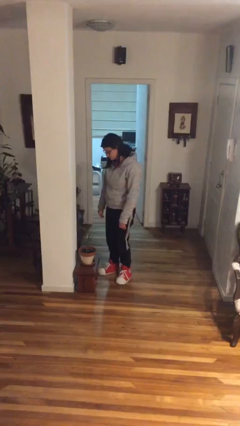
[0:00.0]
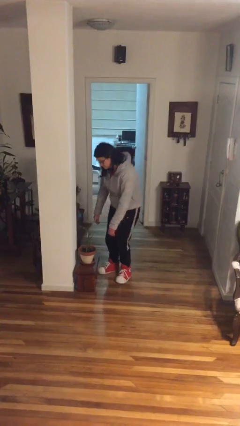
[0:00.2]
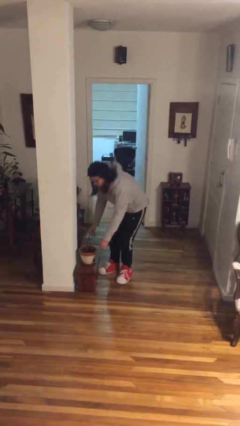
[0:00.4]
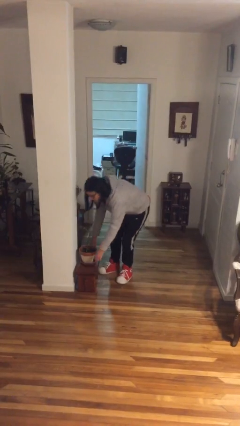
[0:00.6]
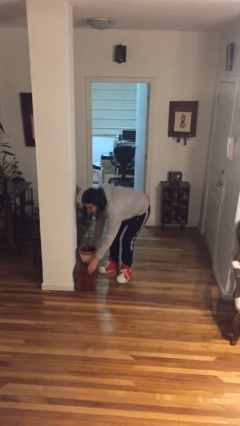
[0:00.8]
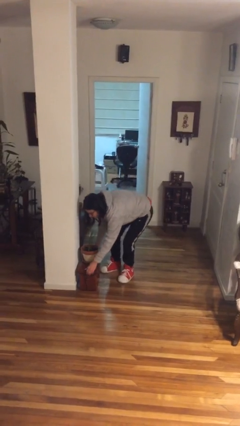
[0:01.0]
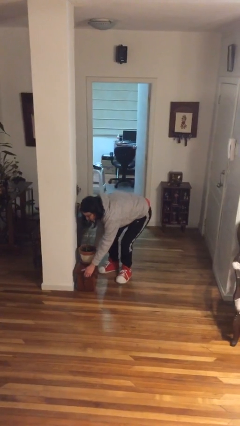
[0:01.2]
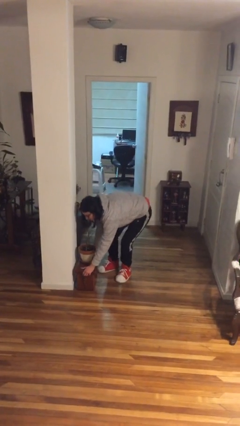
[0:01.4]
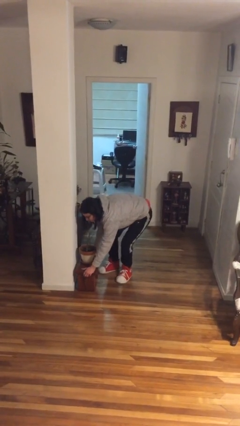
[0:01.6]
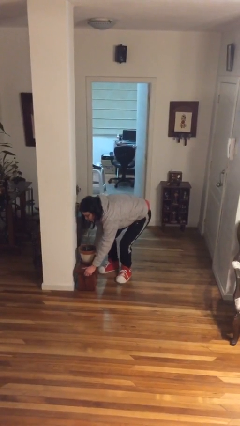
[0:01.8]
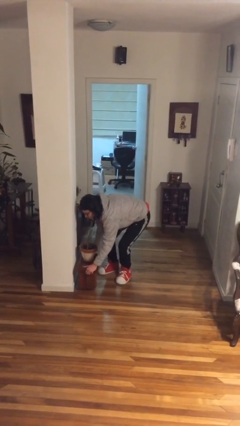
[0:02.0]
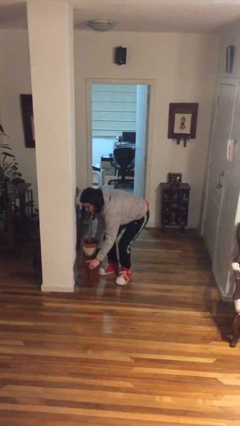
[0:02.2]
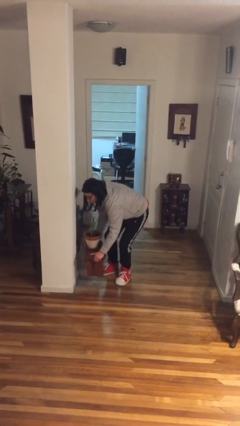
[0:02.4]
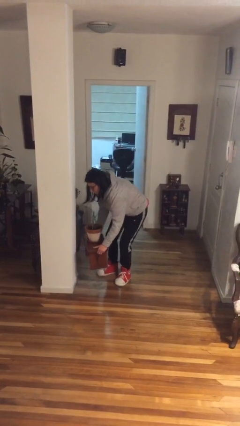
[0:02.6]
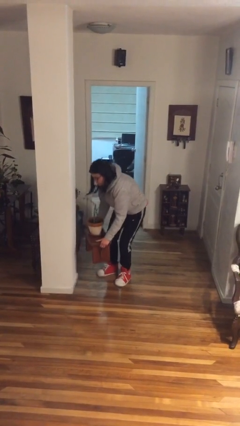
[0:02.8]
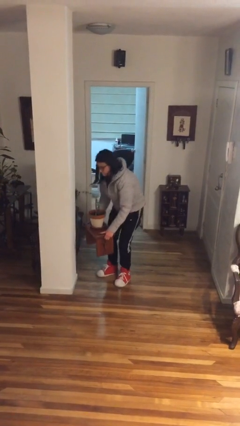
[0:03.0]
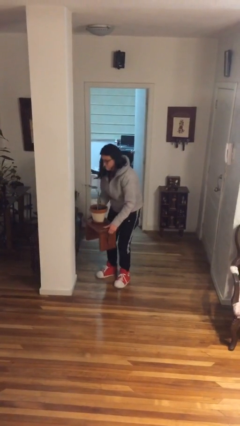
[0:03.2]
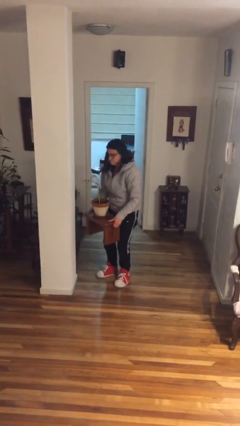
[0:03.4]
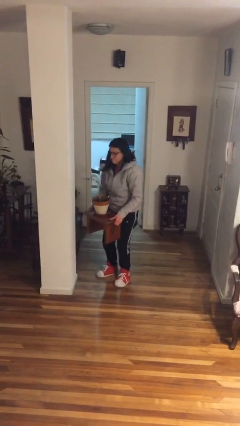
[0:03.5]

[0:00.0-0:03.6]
person picks up object from floor

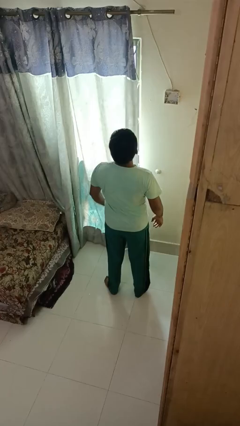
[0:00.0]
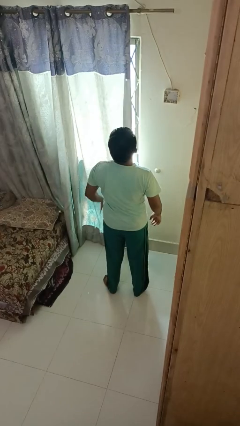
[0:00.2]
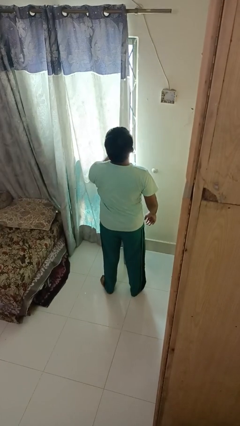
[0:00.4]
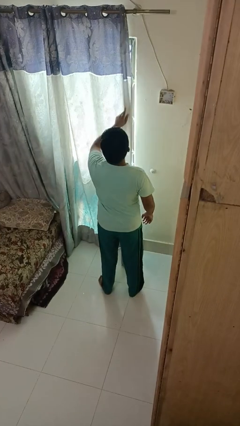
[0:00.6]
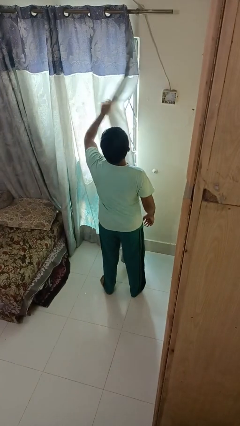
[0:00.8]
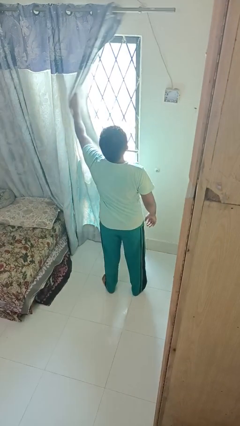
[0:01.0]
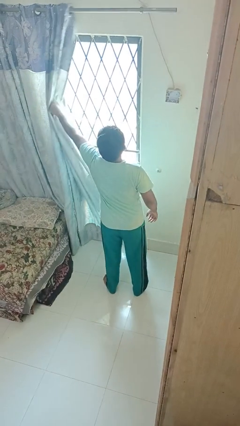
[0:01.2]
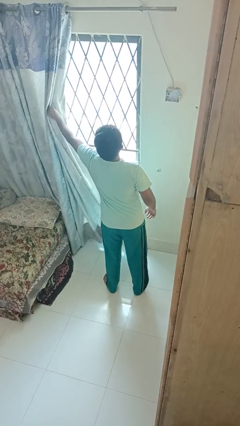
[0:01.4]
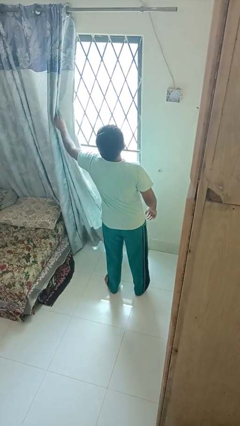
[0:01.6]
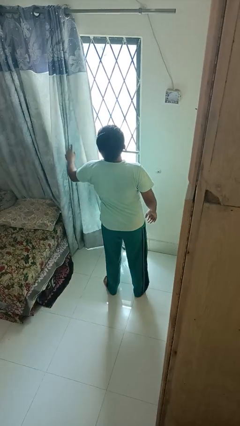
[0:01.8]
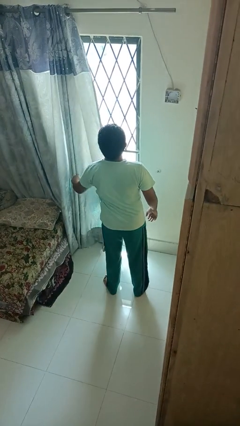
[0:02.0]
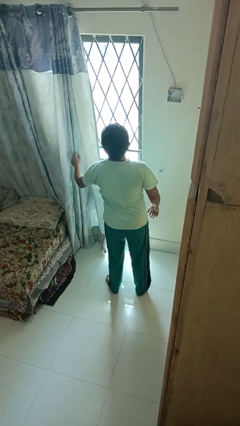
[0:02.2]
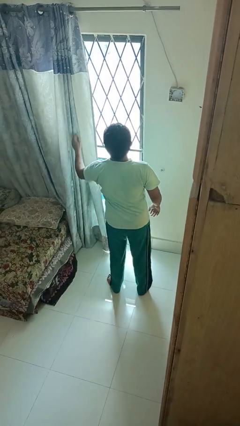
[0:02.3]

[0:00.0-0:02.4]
person opens curtains

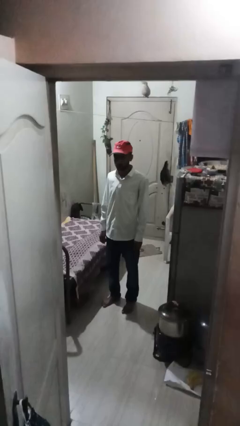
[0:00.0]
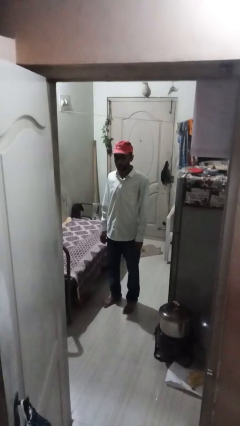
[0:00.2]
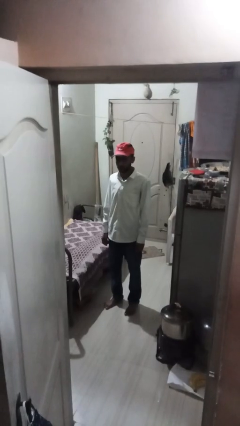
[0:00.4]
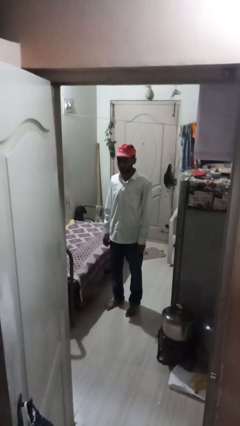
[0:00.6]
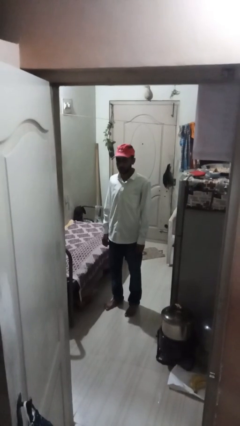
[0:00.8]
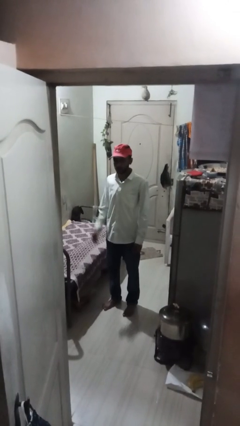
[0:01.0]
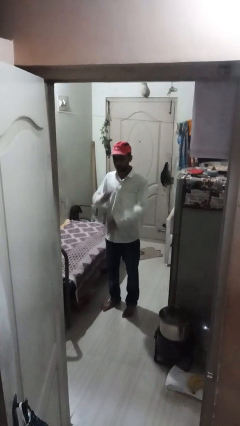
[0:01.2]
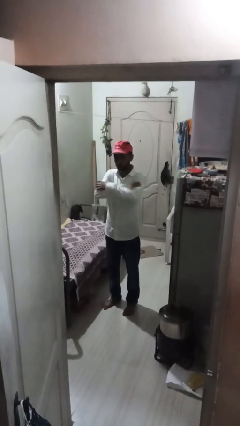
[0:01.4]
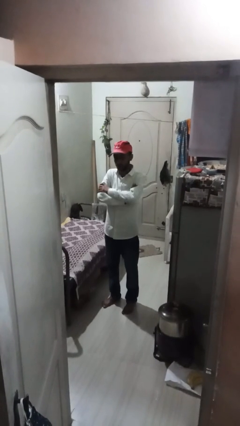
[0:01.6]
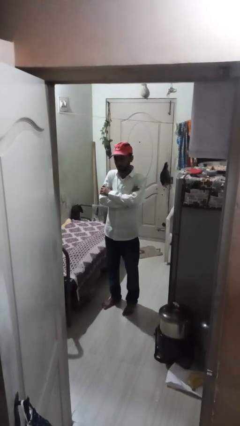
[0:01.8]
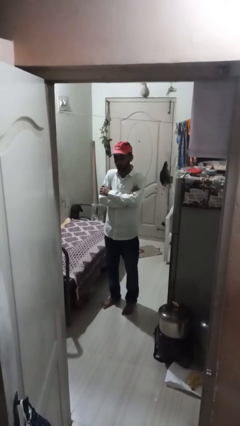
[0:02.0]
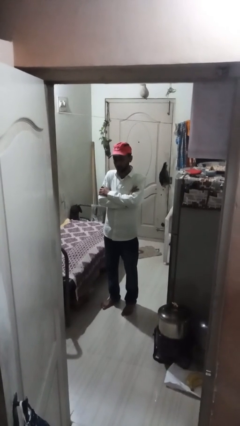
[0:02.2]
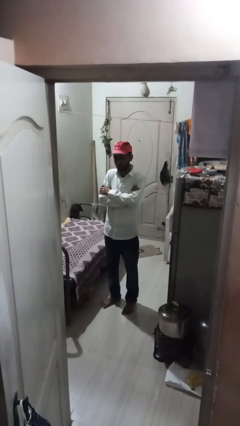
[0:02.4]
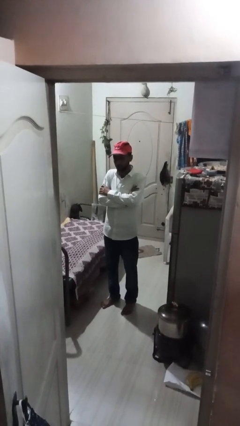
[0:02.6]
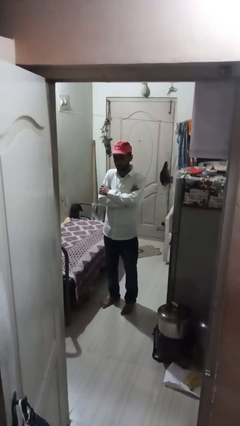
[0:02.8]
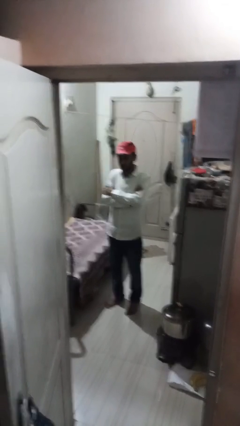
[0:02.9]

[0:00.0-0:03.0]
person crosses arms

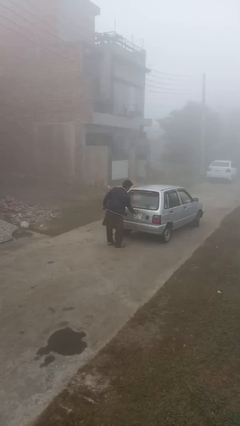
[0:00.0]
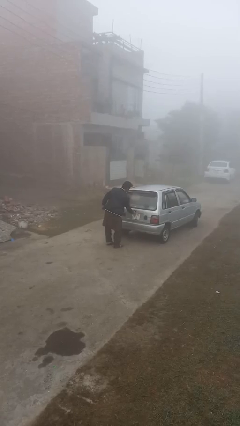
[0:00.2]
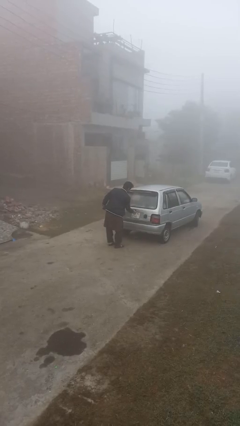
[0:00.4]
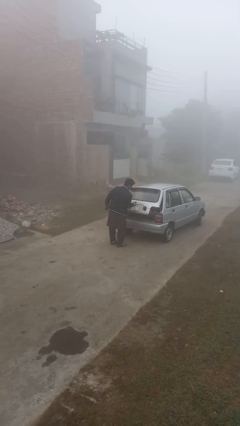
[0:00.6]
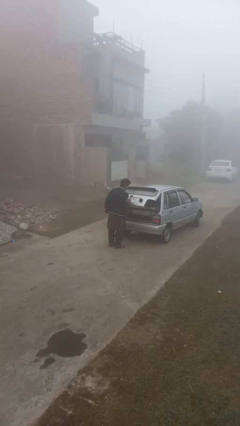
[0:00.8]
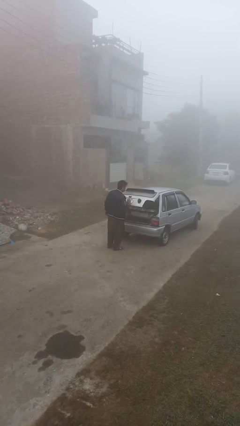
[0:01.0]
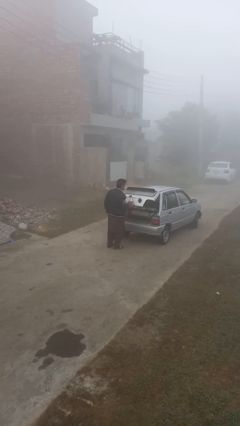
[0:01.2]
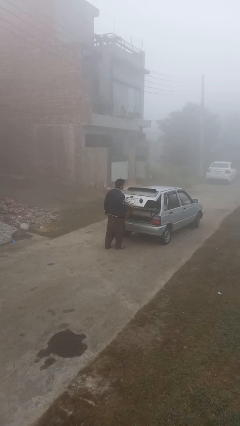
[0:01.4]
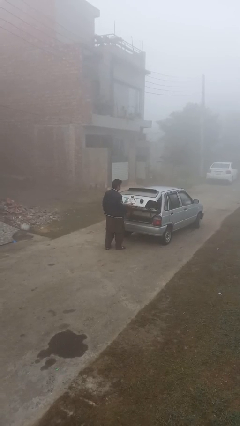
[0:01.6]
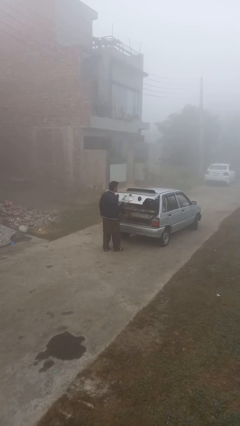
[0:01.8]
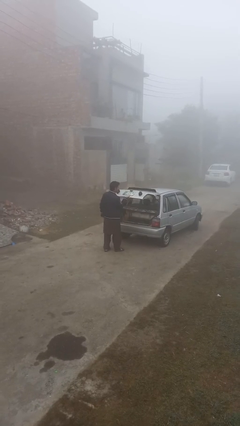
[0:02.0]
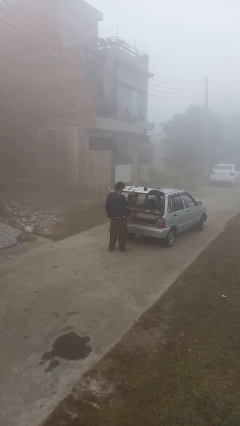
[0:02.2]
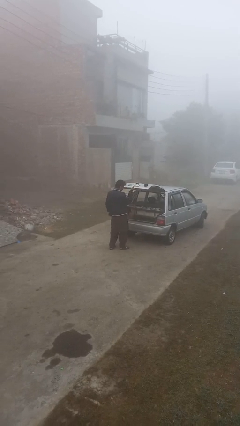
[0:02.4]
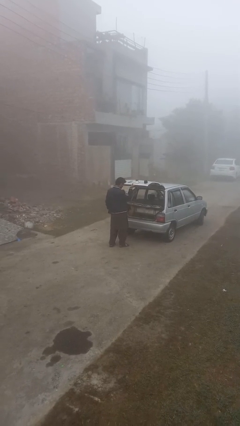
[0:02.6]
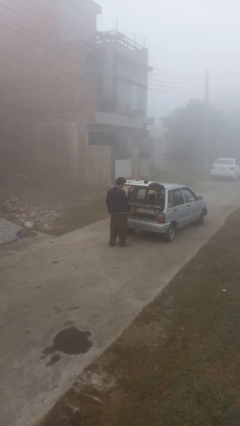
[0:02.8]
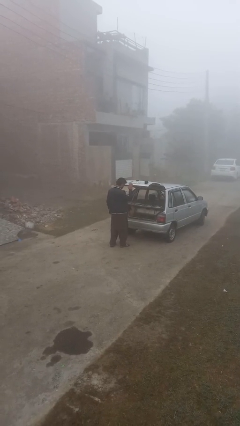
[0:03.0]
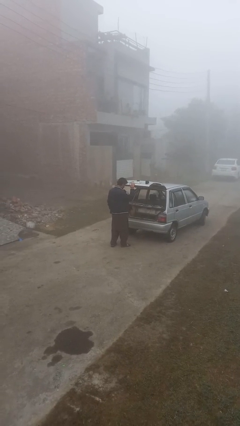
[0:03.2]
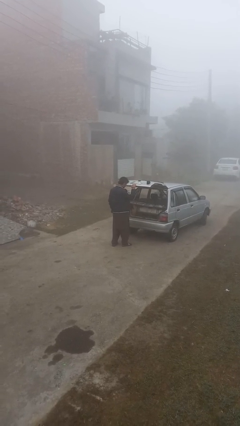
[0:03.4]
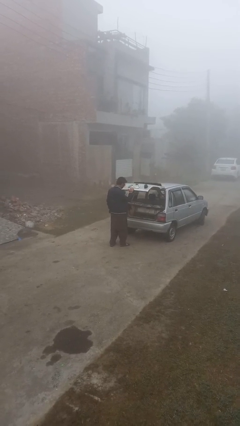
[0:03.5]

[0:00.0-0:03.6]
person opens car trunk

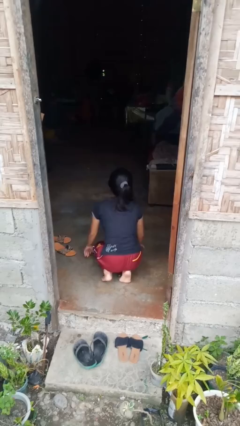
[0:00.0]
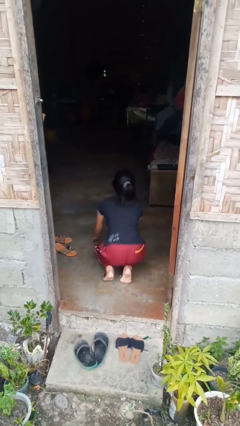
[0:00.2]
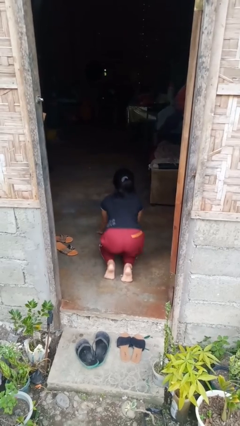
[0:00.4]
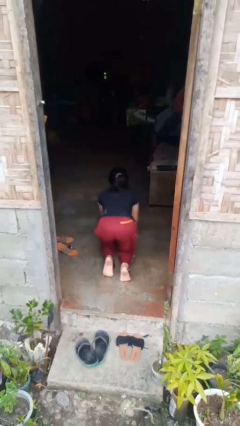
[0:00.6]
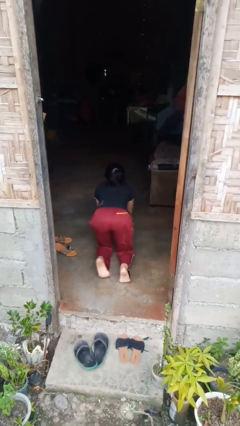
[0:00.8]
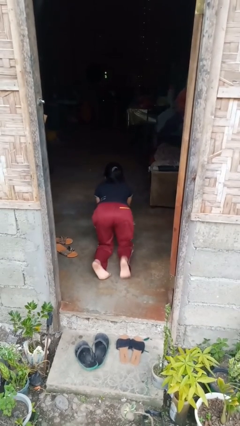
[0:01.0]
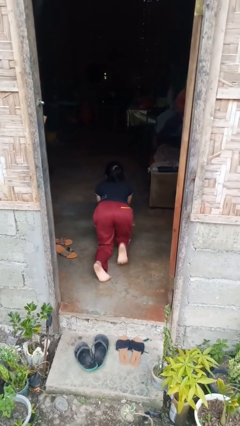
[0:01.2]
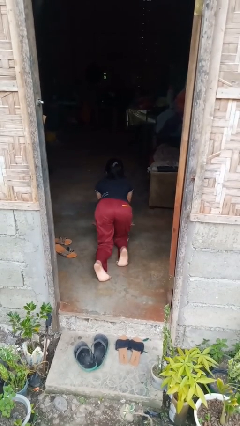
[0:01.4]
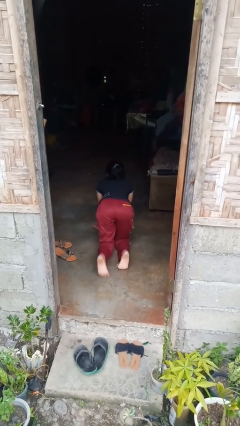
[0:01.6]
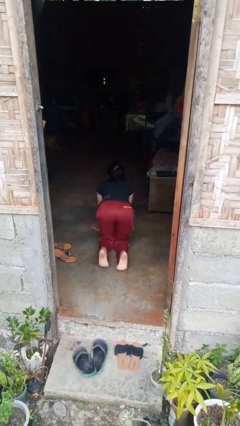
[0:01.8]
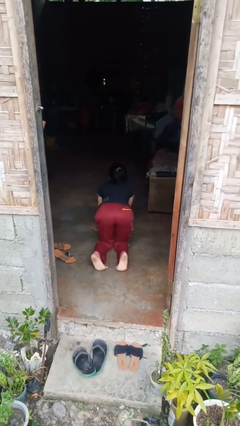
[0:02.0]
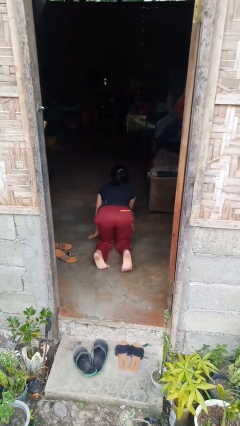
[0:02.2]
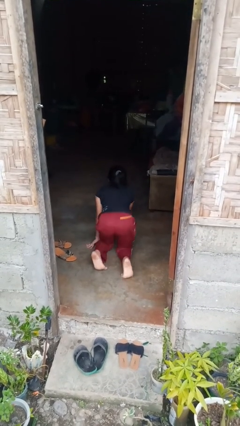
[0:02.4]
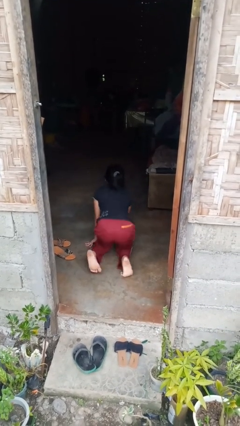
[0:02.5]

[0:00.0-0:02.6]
person crawls

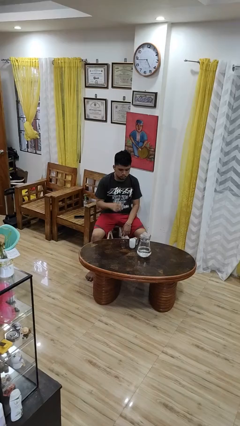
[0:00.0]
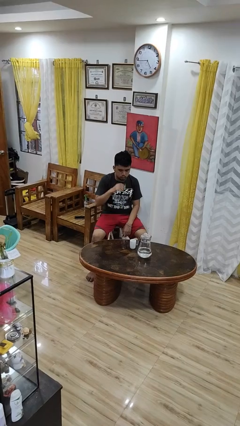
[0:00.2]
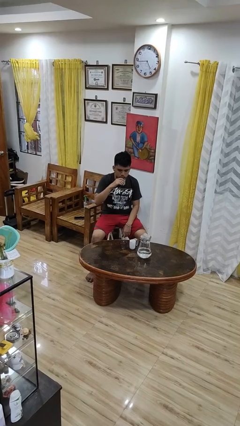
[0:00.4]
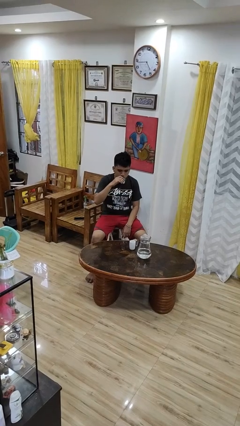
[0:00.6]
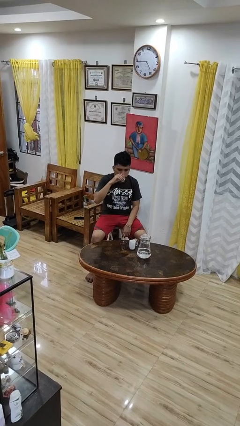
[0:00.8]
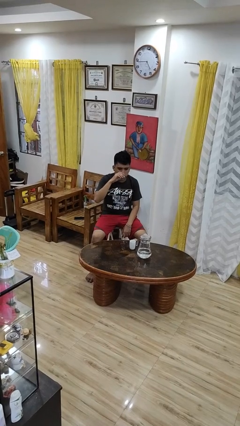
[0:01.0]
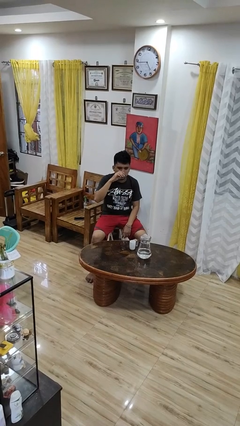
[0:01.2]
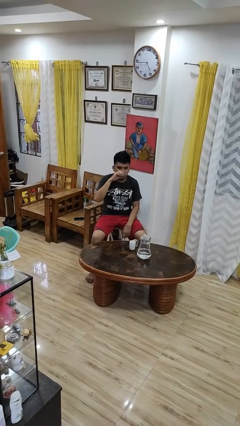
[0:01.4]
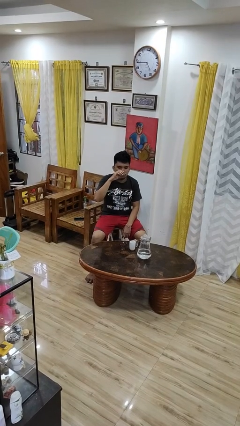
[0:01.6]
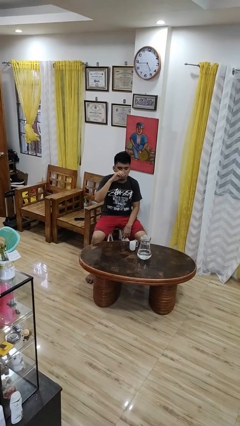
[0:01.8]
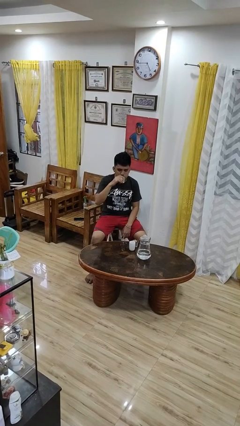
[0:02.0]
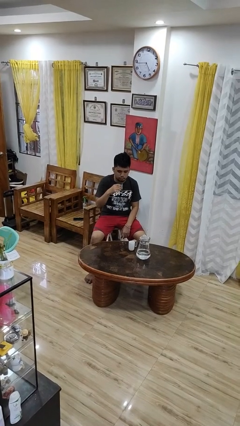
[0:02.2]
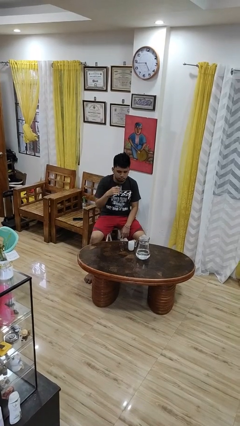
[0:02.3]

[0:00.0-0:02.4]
person drinks from shotglass
